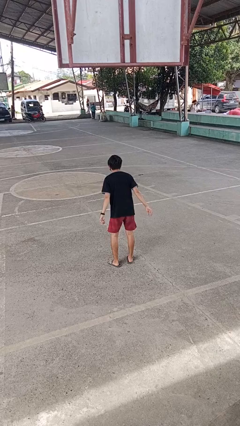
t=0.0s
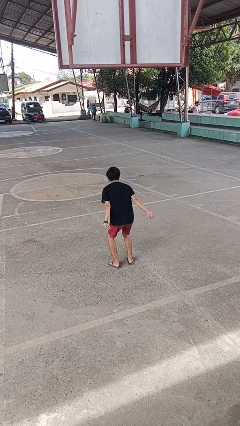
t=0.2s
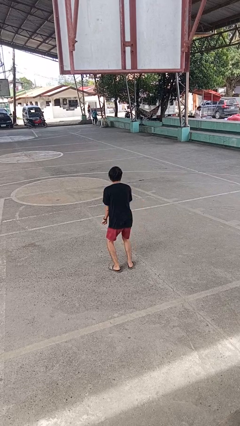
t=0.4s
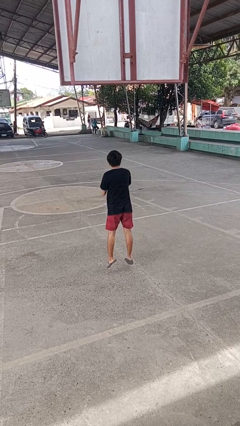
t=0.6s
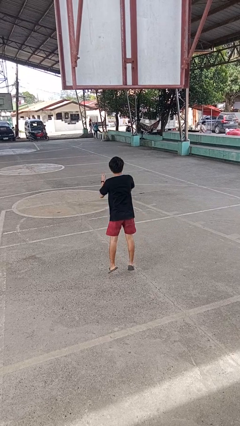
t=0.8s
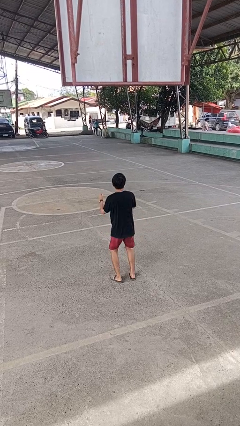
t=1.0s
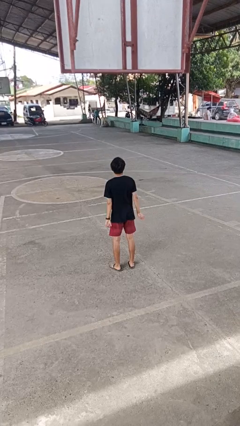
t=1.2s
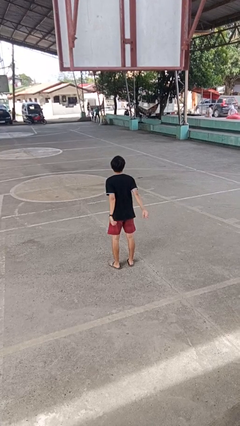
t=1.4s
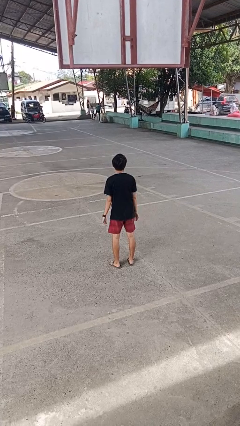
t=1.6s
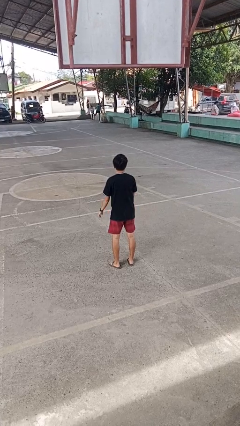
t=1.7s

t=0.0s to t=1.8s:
person jumps

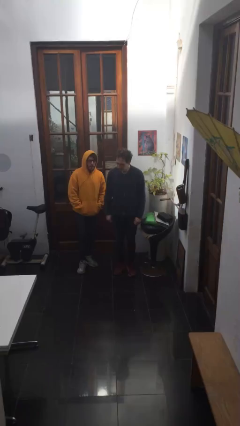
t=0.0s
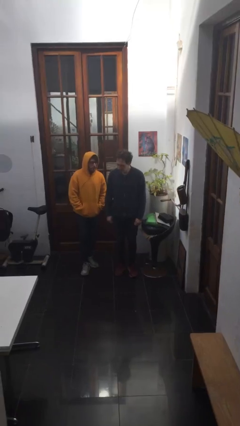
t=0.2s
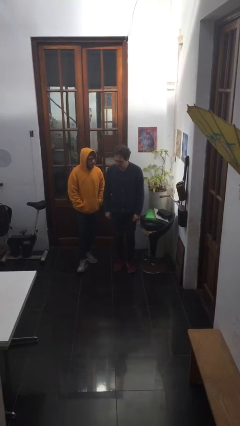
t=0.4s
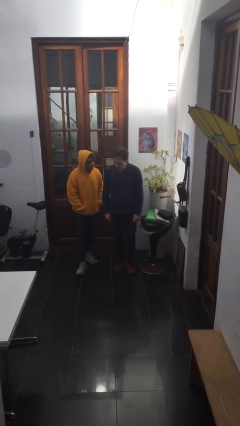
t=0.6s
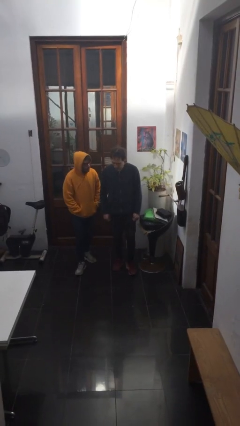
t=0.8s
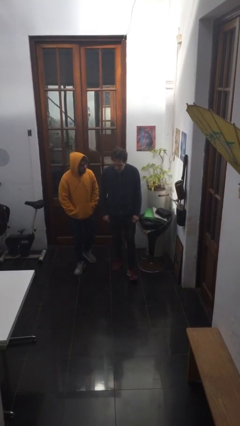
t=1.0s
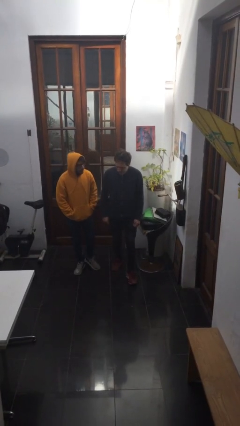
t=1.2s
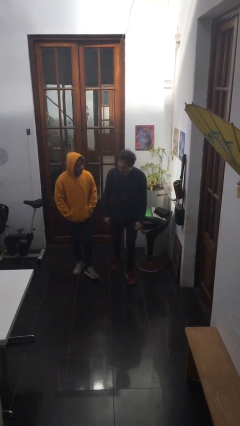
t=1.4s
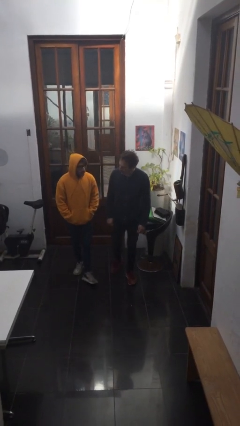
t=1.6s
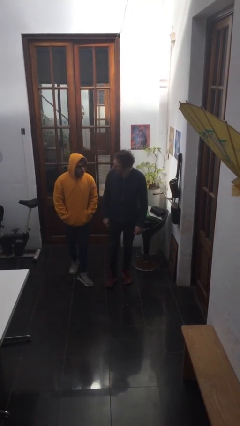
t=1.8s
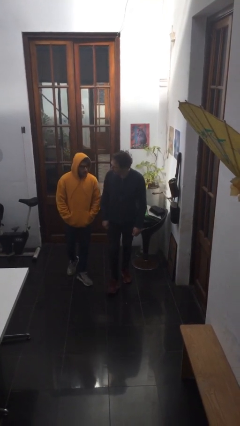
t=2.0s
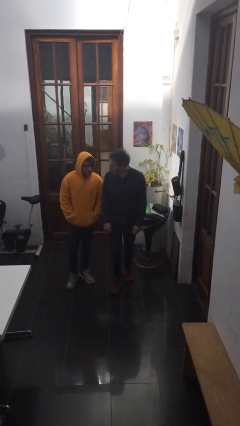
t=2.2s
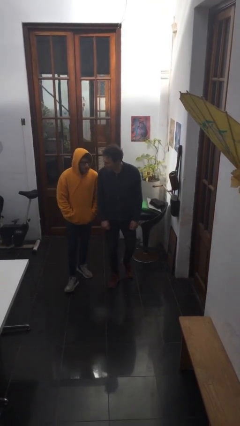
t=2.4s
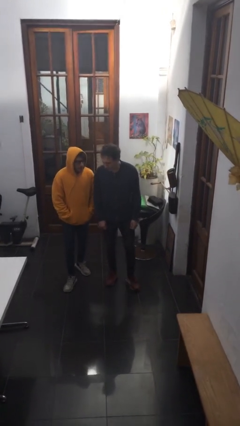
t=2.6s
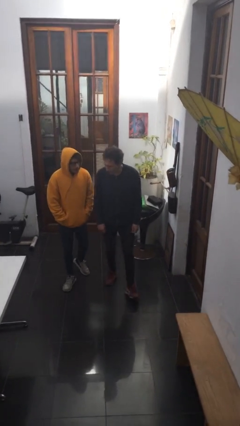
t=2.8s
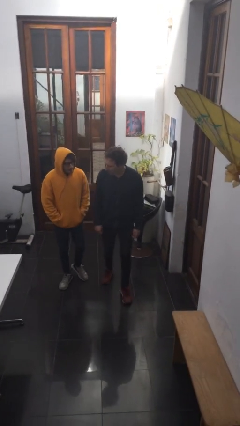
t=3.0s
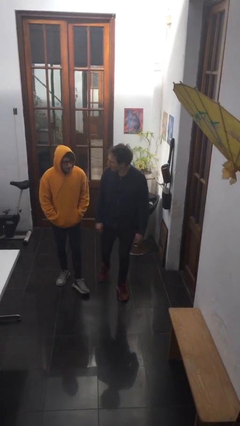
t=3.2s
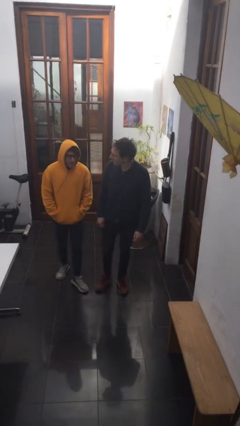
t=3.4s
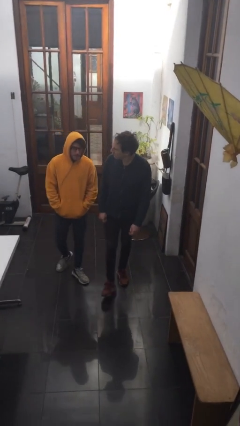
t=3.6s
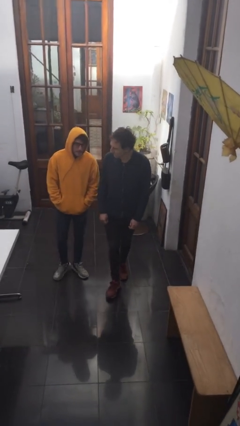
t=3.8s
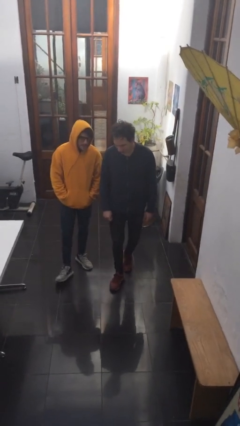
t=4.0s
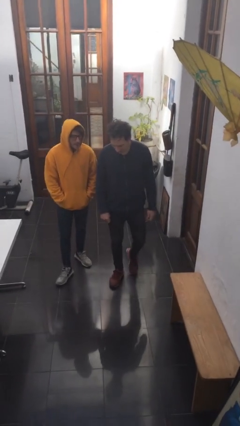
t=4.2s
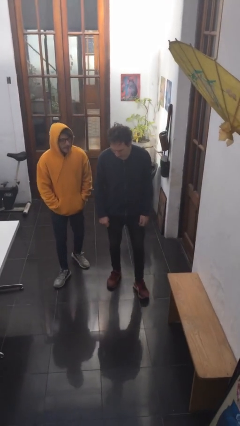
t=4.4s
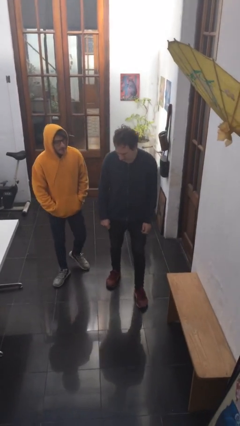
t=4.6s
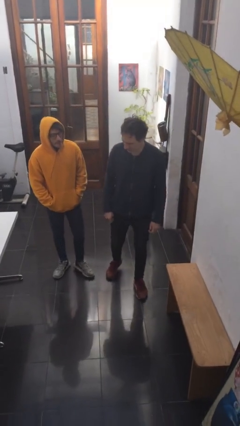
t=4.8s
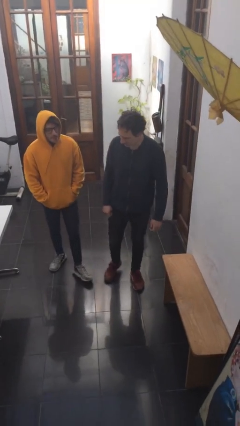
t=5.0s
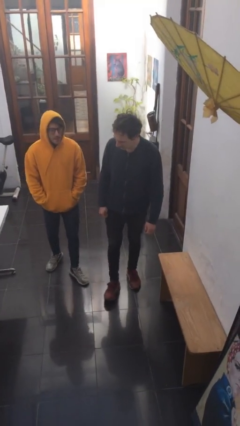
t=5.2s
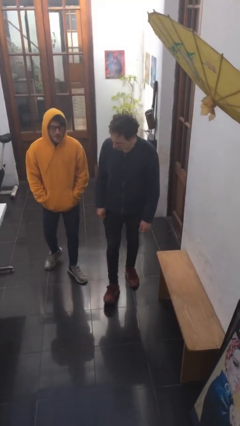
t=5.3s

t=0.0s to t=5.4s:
person talks to person

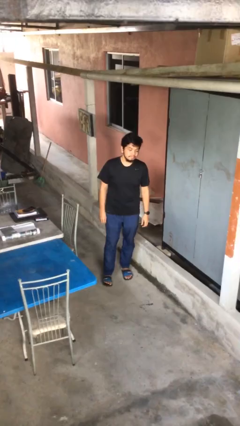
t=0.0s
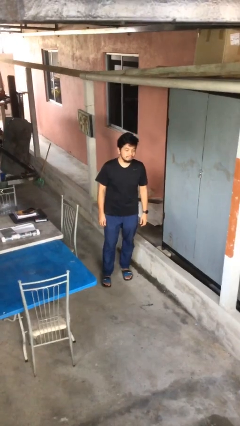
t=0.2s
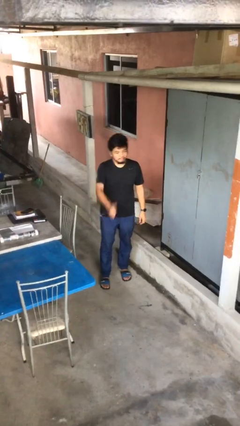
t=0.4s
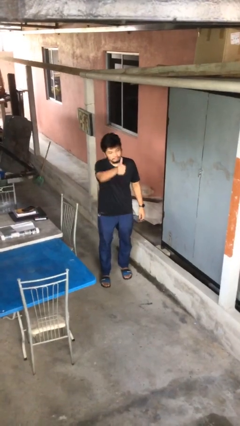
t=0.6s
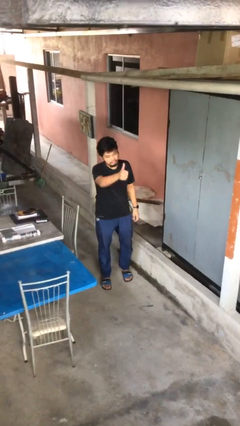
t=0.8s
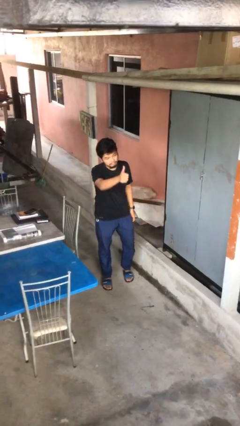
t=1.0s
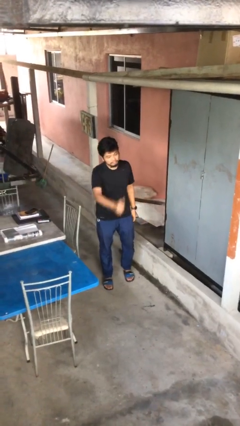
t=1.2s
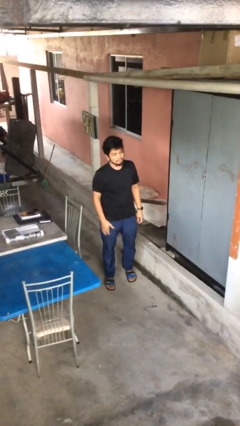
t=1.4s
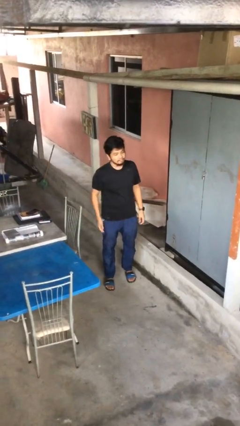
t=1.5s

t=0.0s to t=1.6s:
person gestures thumbs up

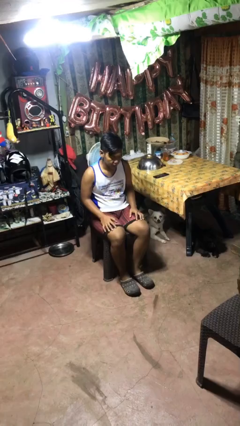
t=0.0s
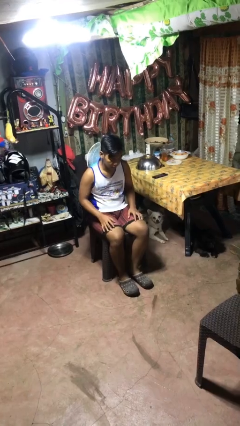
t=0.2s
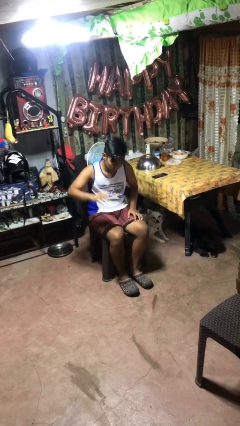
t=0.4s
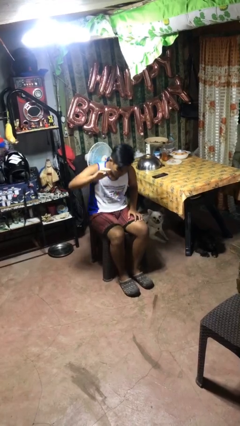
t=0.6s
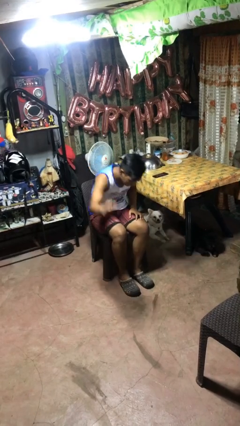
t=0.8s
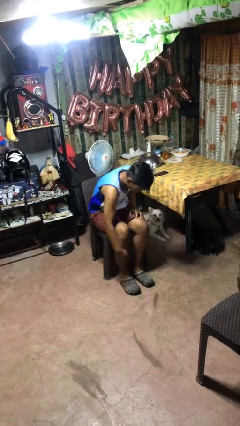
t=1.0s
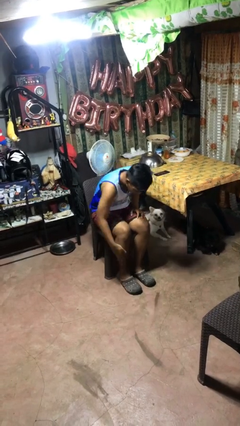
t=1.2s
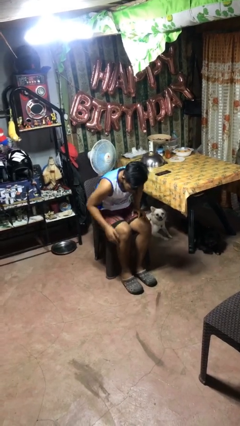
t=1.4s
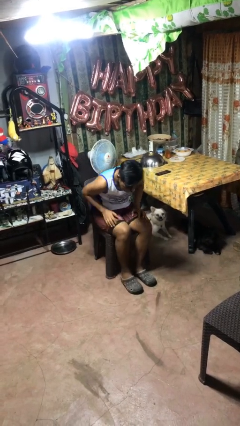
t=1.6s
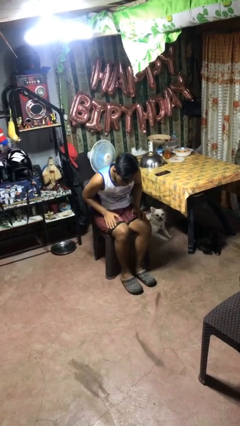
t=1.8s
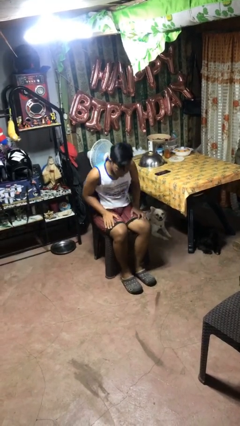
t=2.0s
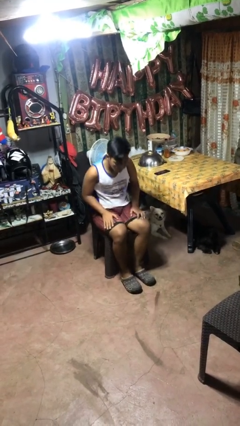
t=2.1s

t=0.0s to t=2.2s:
person swats bug

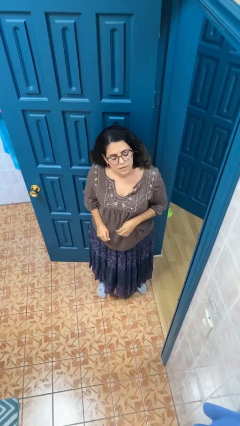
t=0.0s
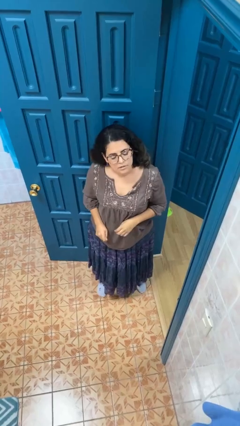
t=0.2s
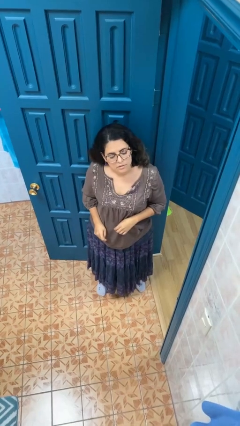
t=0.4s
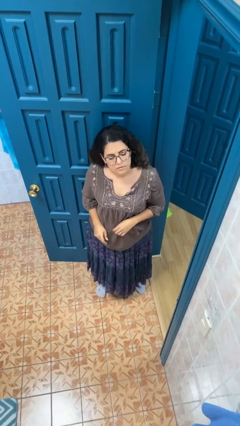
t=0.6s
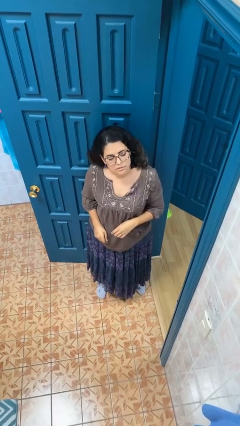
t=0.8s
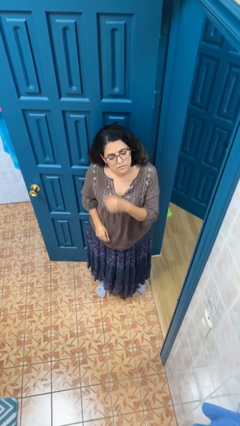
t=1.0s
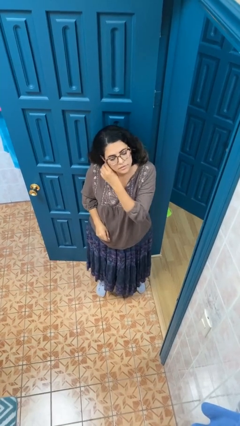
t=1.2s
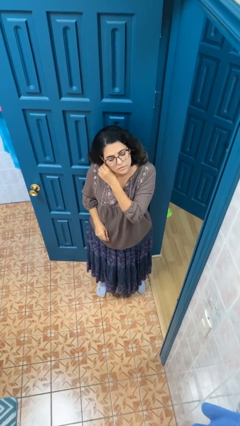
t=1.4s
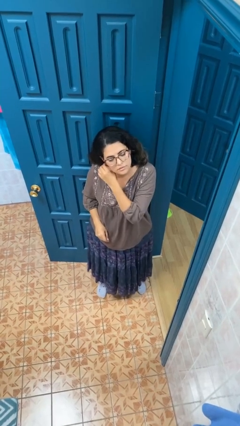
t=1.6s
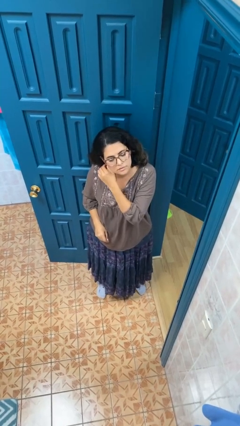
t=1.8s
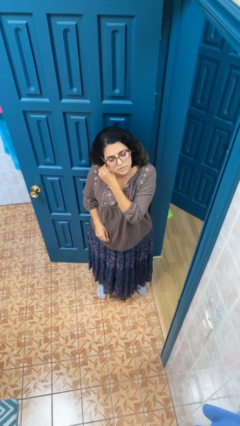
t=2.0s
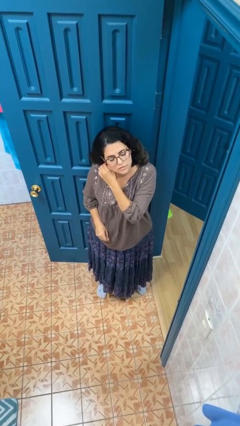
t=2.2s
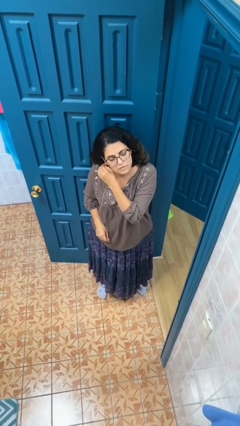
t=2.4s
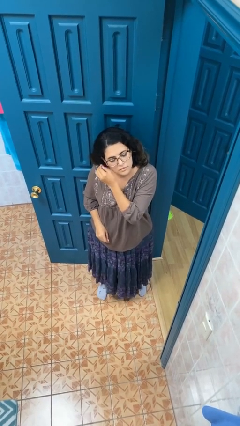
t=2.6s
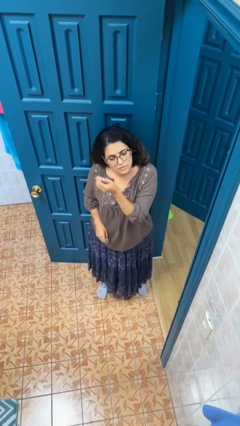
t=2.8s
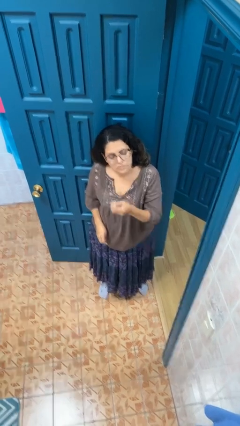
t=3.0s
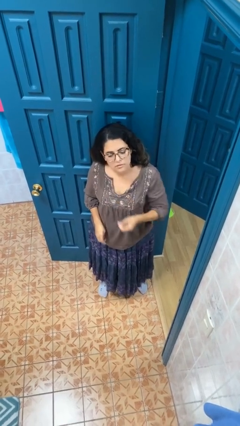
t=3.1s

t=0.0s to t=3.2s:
person takes off earrings

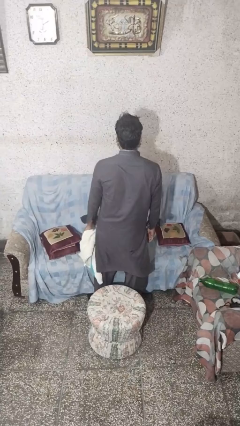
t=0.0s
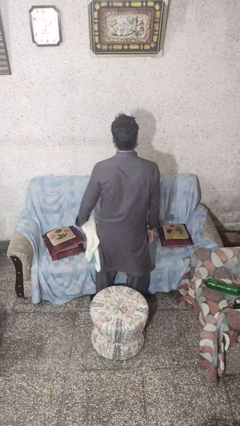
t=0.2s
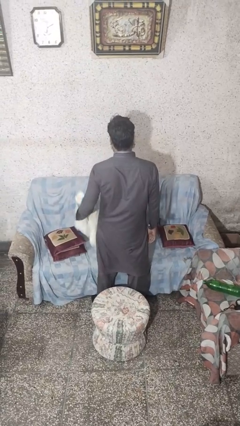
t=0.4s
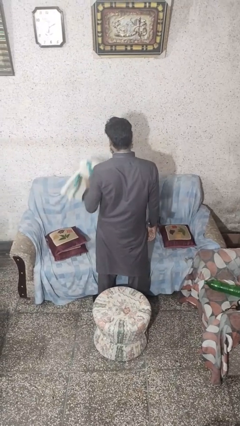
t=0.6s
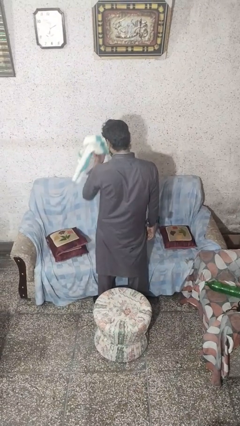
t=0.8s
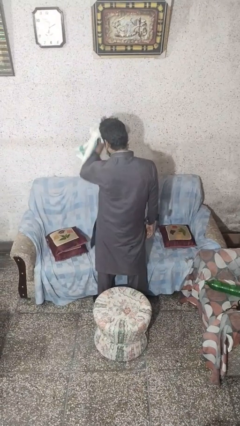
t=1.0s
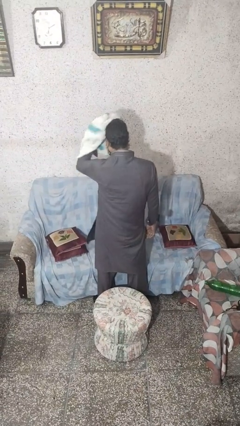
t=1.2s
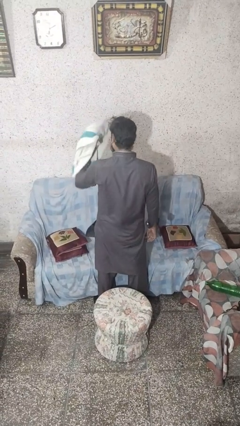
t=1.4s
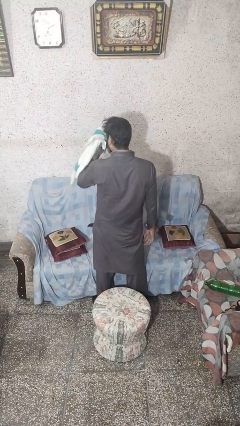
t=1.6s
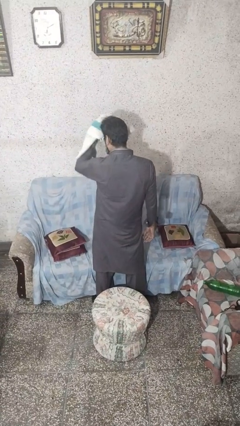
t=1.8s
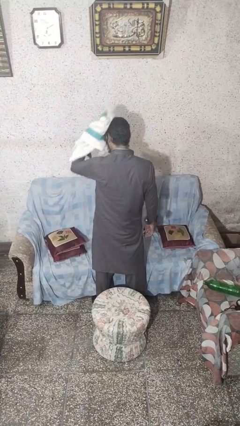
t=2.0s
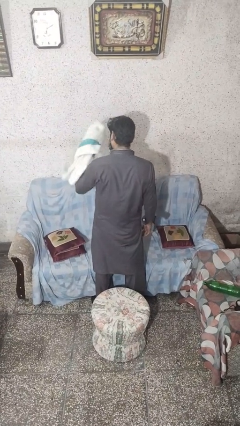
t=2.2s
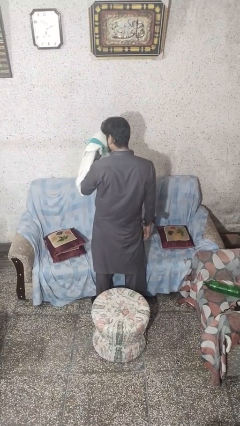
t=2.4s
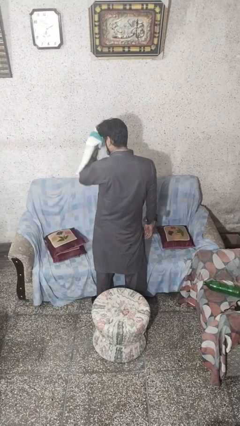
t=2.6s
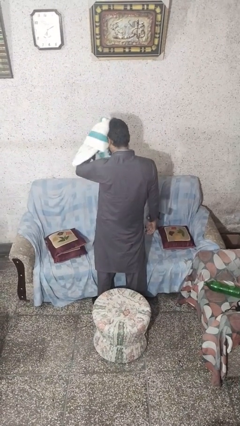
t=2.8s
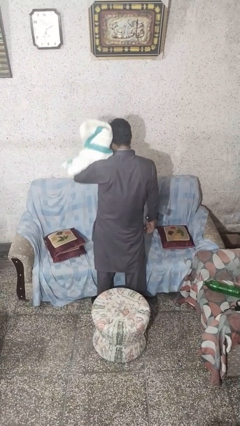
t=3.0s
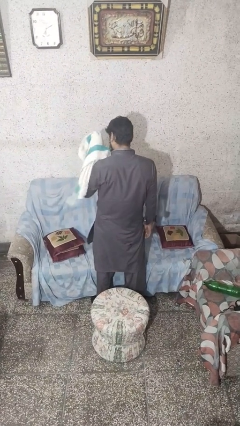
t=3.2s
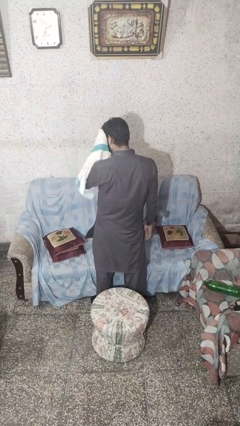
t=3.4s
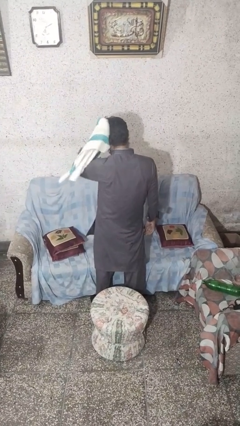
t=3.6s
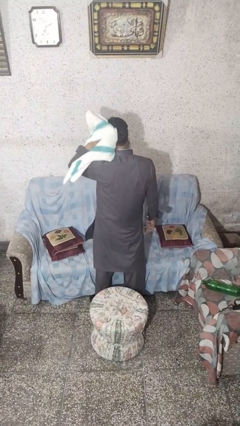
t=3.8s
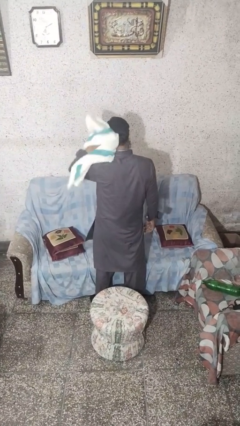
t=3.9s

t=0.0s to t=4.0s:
person dries hair with towel
